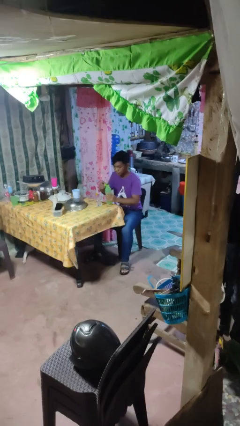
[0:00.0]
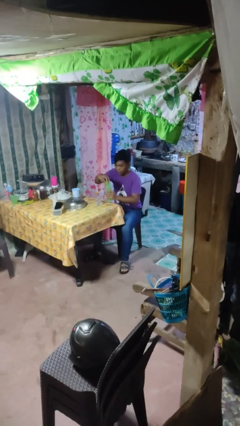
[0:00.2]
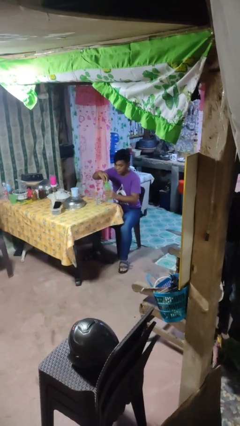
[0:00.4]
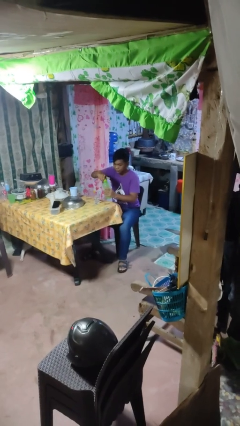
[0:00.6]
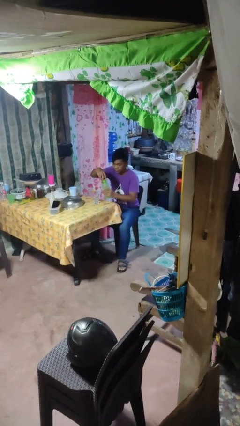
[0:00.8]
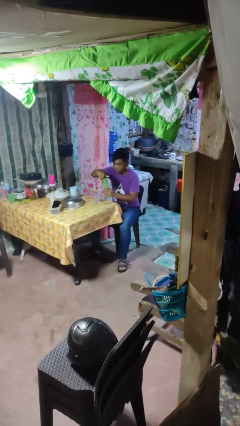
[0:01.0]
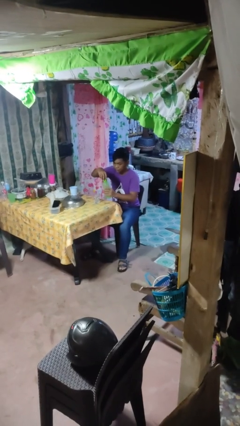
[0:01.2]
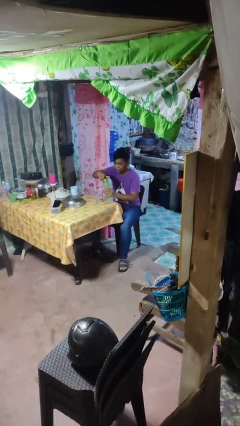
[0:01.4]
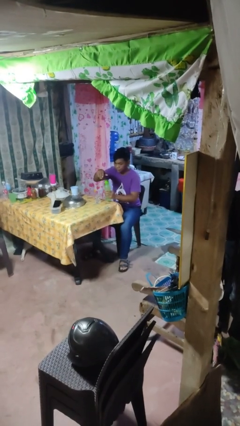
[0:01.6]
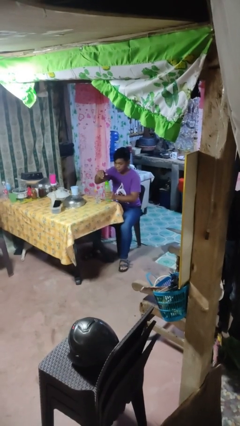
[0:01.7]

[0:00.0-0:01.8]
person screws lid to bottle

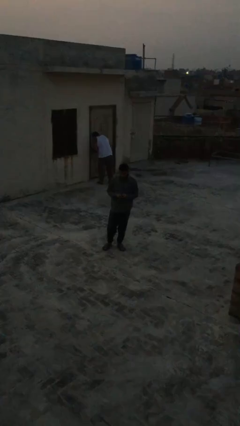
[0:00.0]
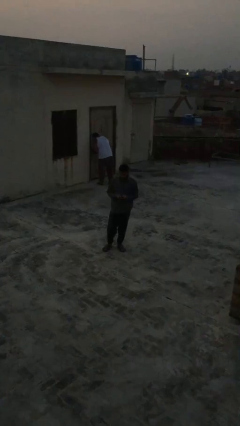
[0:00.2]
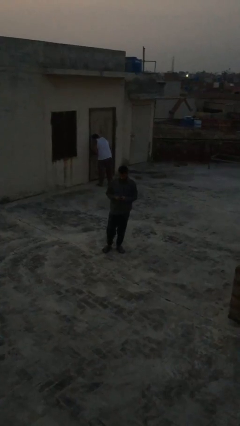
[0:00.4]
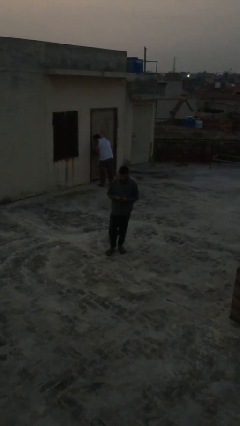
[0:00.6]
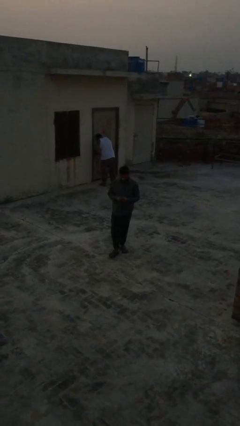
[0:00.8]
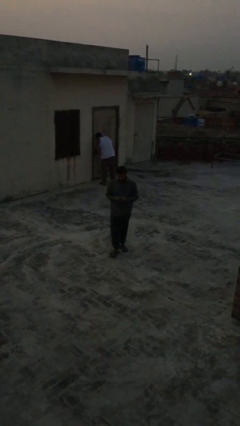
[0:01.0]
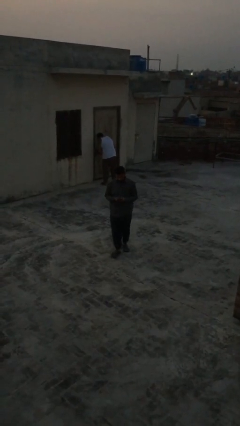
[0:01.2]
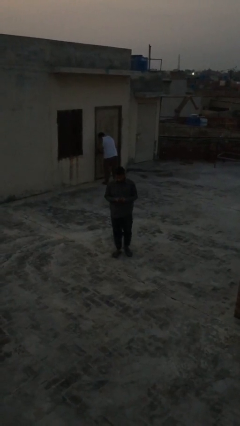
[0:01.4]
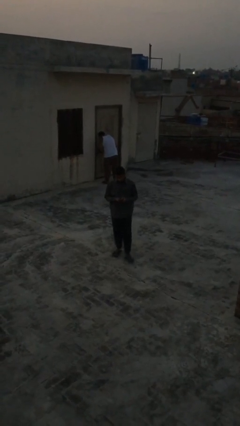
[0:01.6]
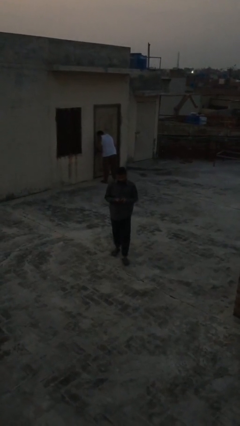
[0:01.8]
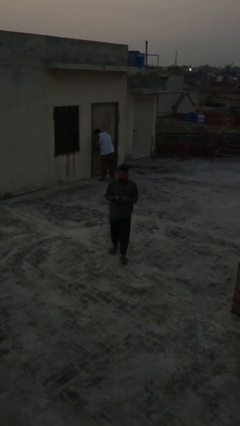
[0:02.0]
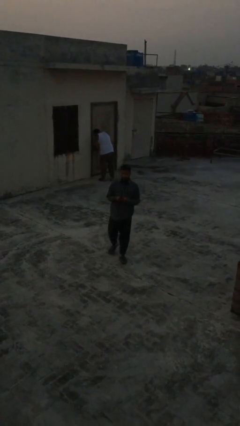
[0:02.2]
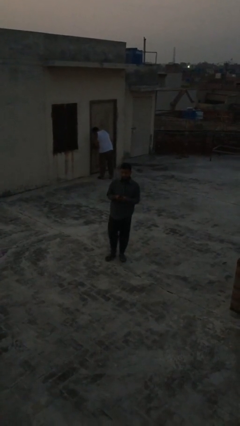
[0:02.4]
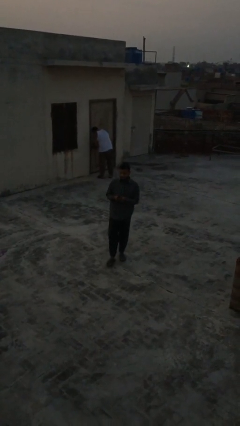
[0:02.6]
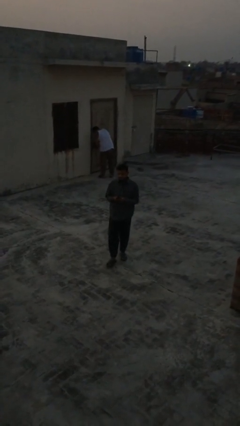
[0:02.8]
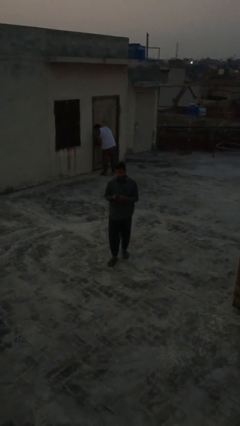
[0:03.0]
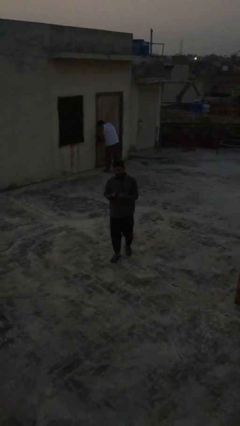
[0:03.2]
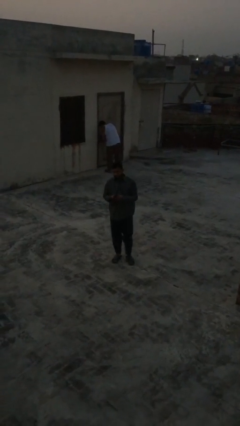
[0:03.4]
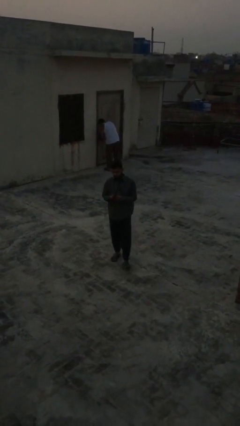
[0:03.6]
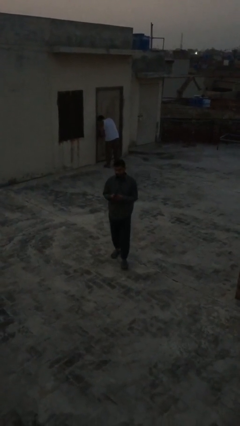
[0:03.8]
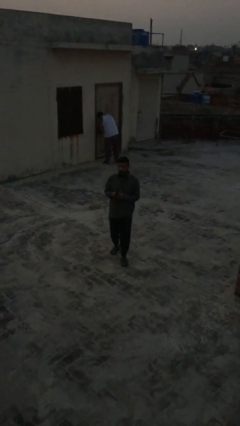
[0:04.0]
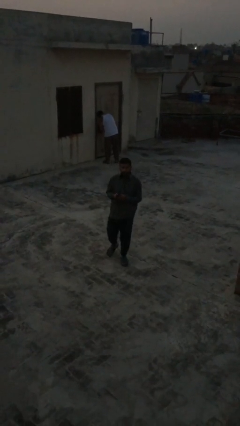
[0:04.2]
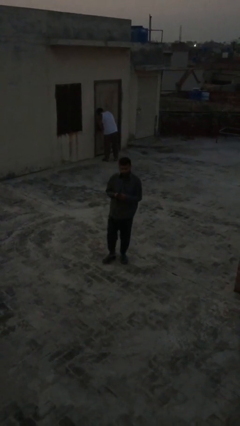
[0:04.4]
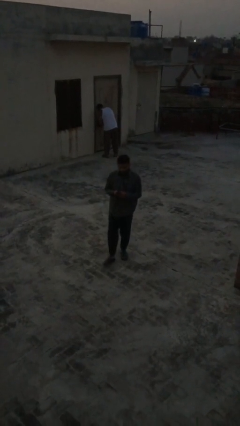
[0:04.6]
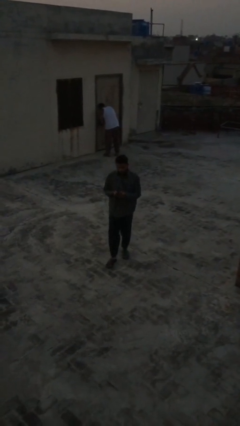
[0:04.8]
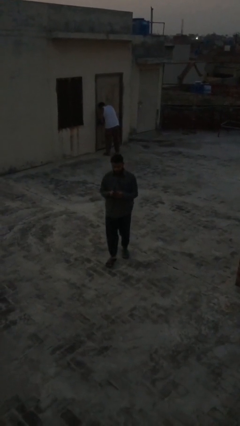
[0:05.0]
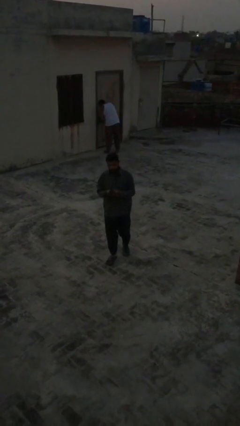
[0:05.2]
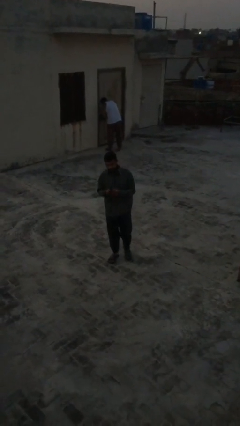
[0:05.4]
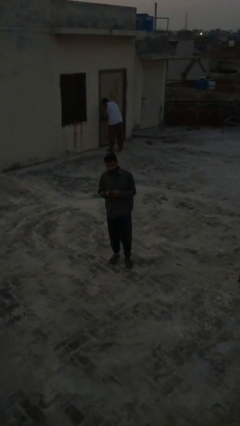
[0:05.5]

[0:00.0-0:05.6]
person texts on phone

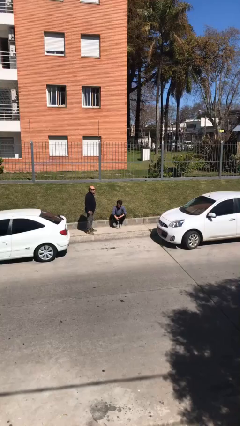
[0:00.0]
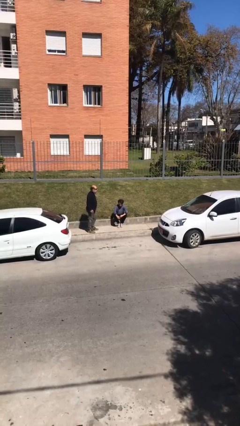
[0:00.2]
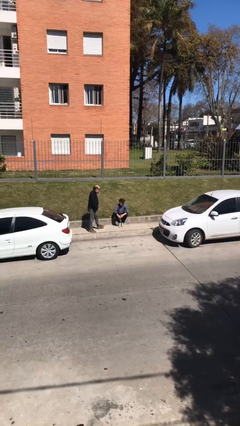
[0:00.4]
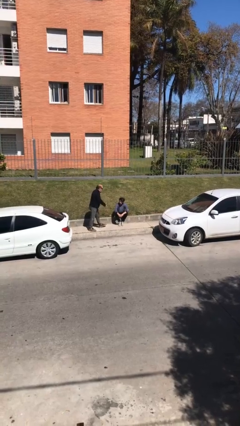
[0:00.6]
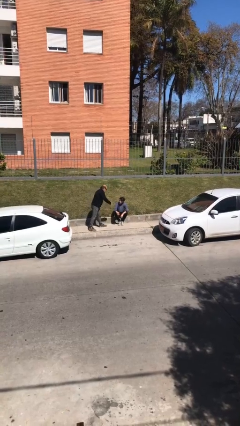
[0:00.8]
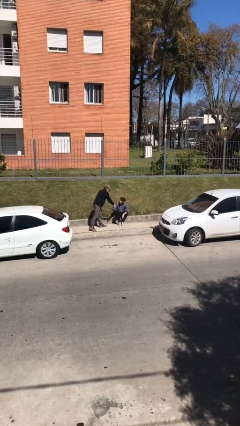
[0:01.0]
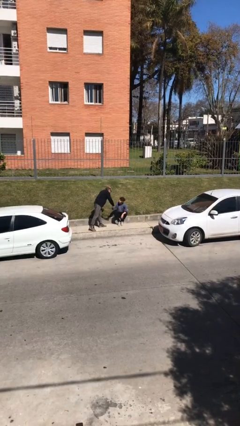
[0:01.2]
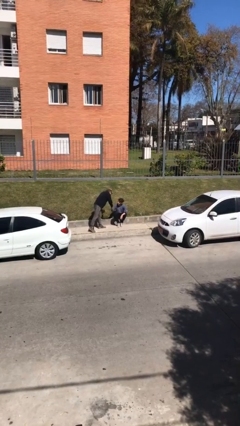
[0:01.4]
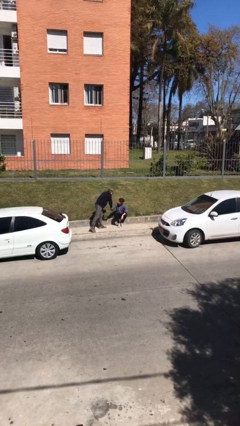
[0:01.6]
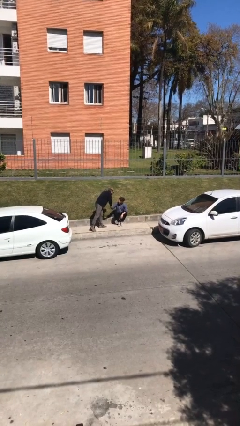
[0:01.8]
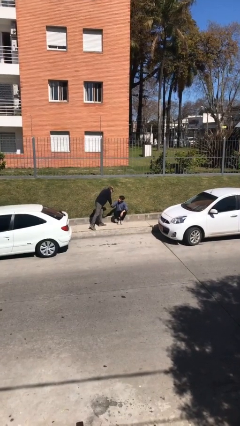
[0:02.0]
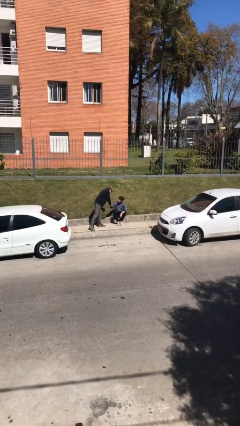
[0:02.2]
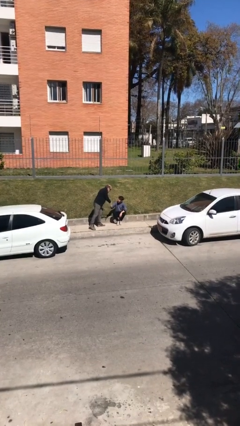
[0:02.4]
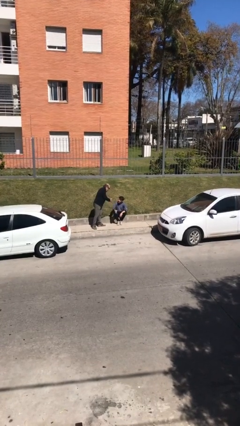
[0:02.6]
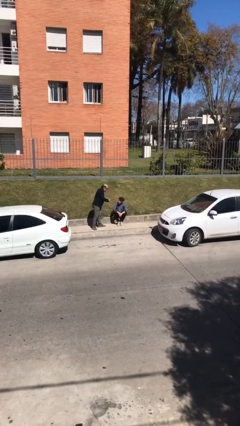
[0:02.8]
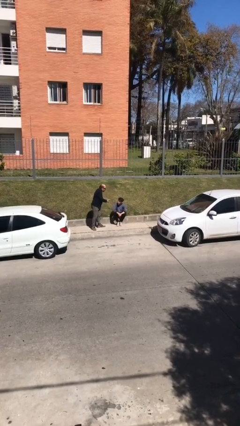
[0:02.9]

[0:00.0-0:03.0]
person shakes hand

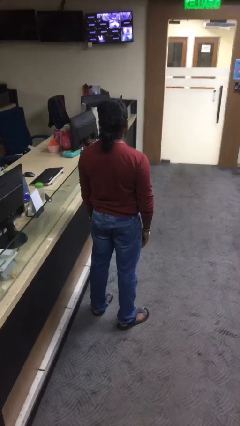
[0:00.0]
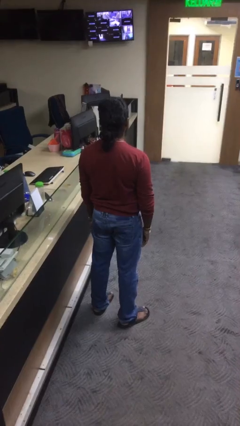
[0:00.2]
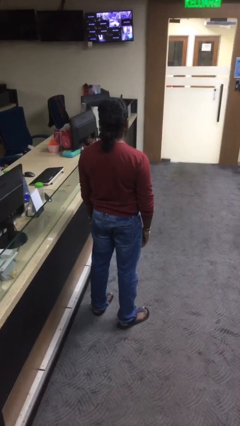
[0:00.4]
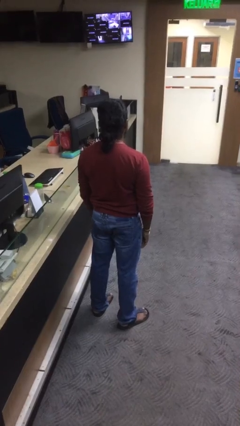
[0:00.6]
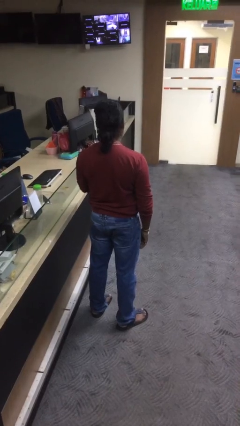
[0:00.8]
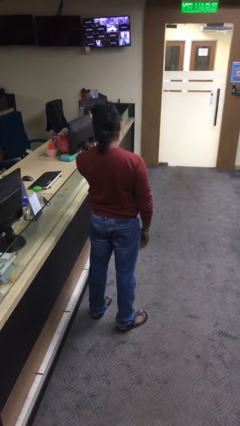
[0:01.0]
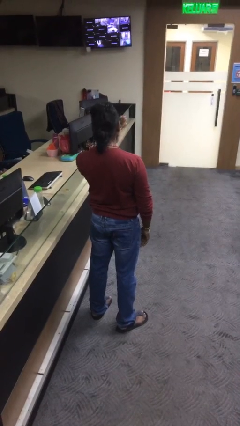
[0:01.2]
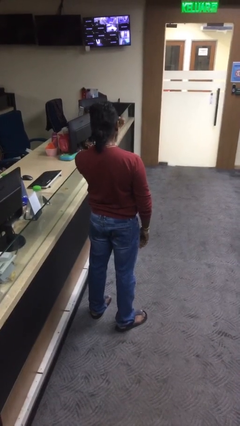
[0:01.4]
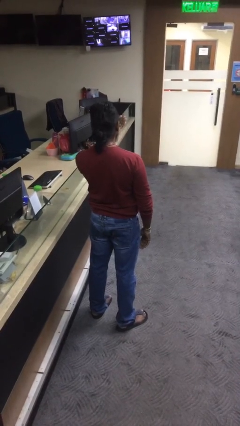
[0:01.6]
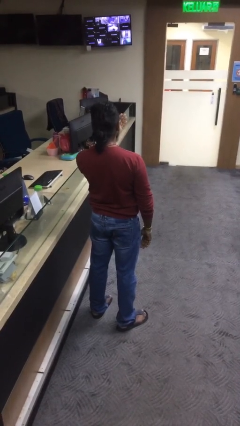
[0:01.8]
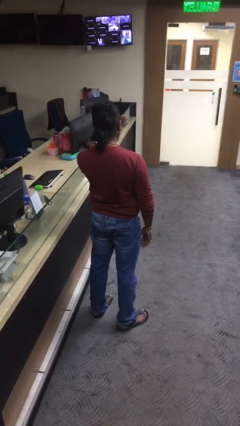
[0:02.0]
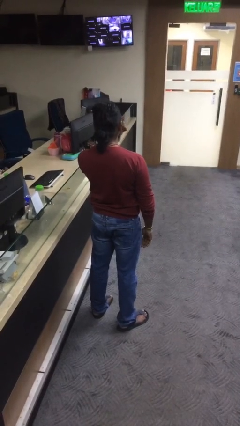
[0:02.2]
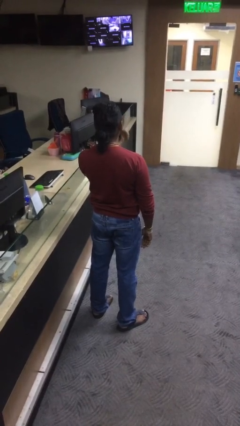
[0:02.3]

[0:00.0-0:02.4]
person gestures come here

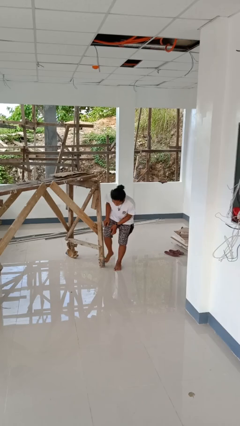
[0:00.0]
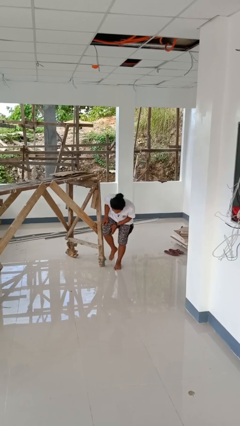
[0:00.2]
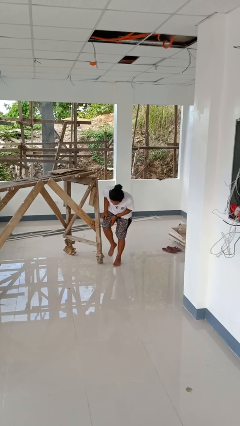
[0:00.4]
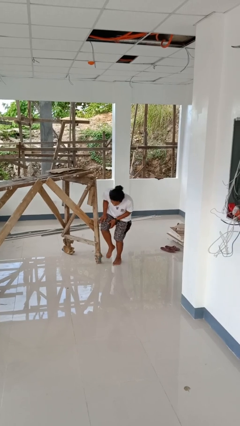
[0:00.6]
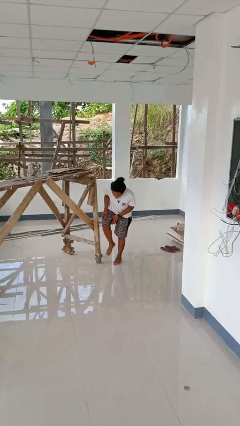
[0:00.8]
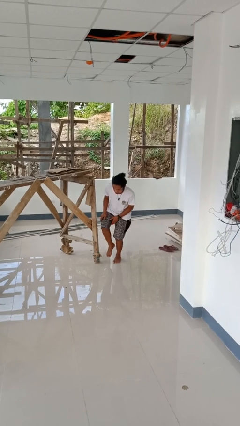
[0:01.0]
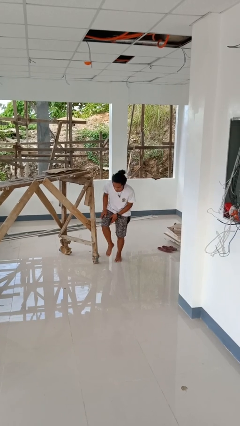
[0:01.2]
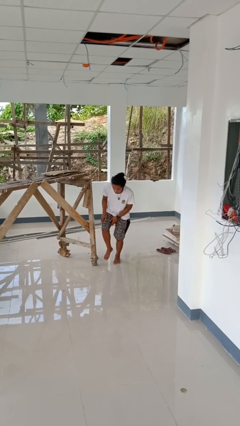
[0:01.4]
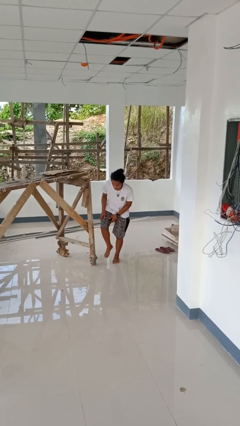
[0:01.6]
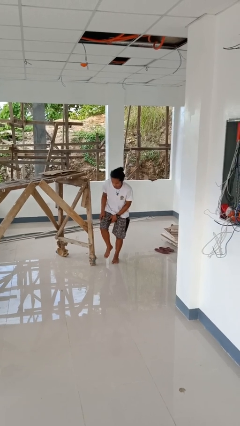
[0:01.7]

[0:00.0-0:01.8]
person stubs toe

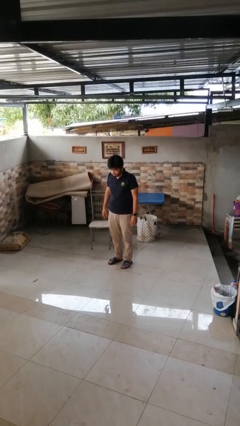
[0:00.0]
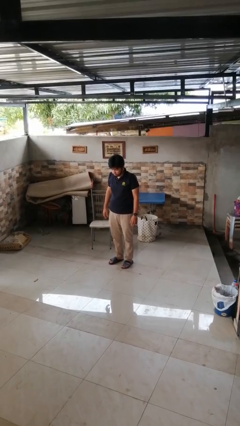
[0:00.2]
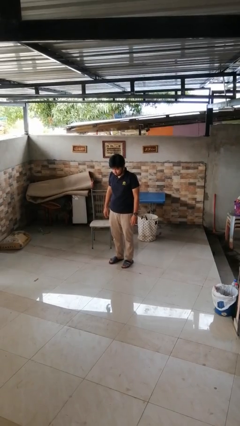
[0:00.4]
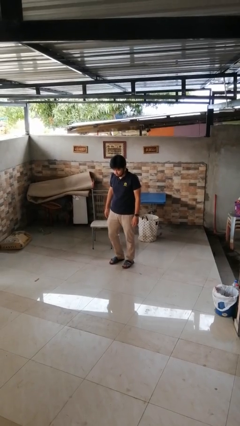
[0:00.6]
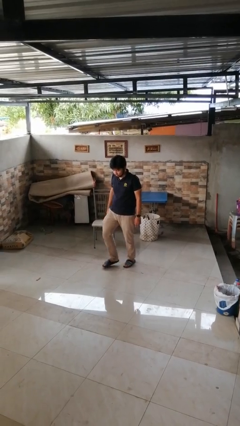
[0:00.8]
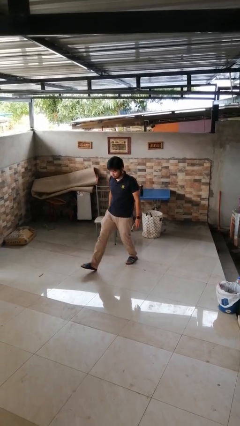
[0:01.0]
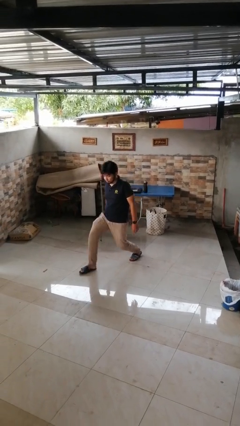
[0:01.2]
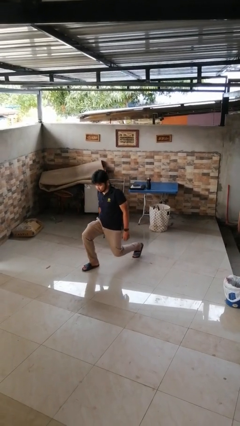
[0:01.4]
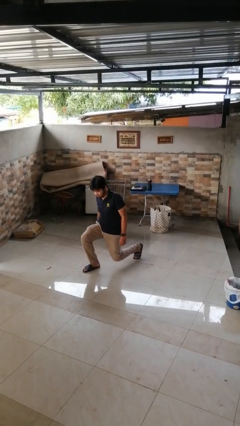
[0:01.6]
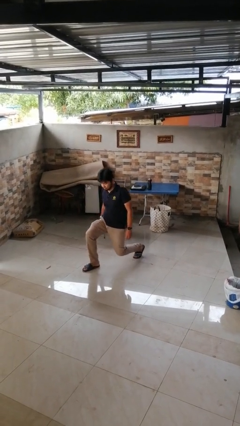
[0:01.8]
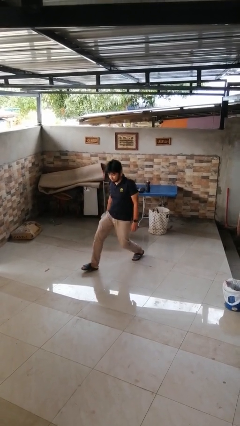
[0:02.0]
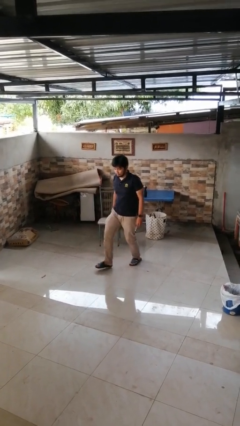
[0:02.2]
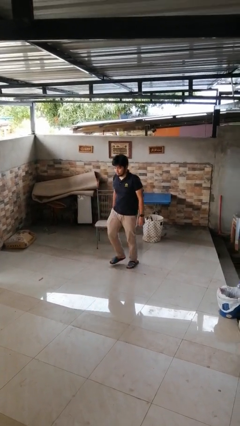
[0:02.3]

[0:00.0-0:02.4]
person exercises with lunges

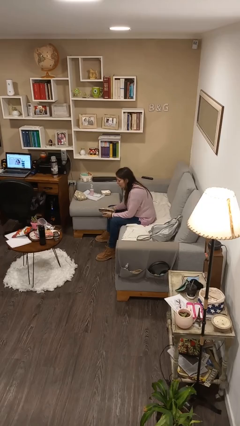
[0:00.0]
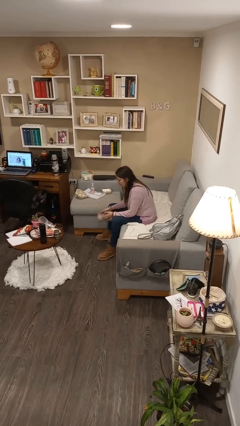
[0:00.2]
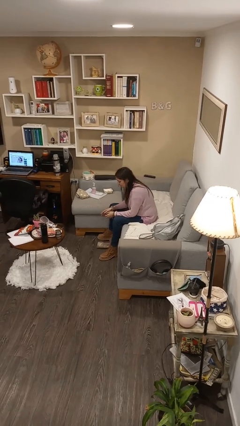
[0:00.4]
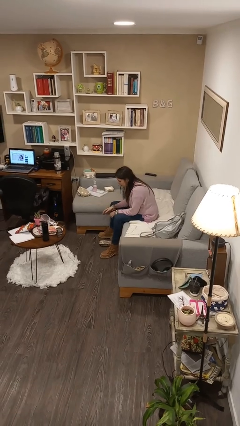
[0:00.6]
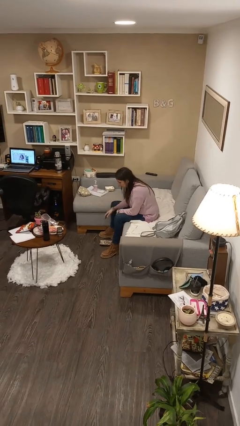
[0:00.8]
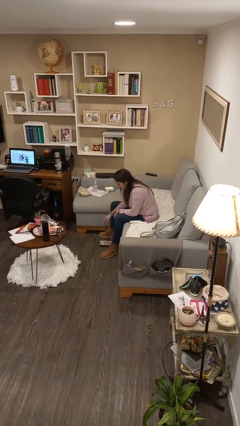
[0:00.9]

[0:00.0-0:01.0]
person drops object
